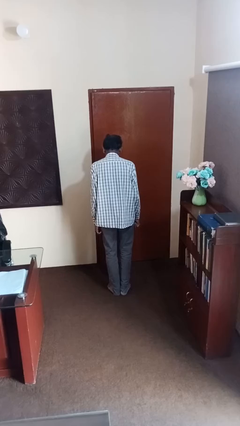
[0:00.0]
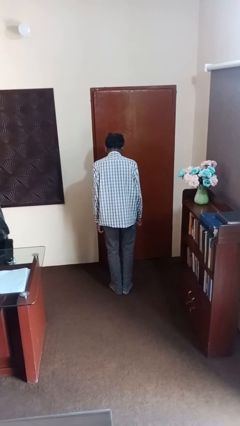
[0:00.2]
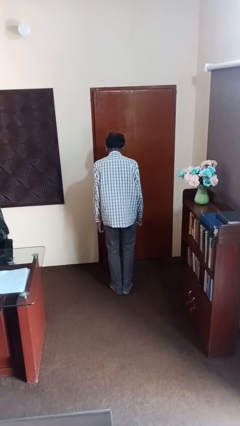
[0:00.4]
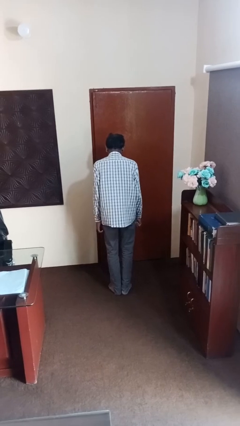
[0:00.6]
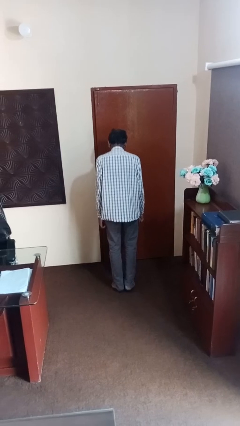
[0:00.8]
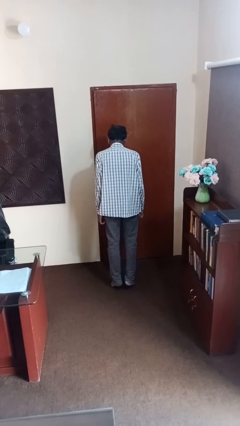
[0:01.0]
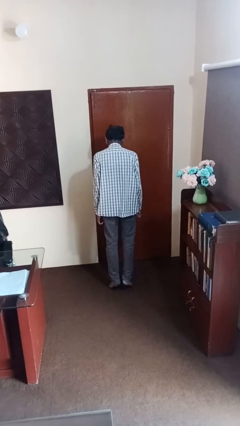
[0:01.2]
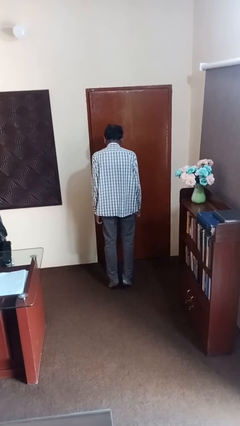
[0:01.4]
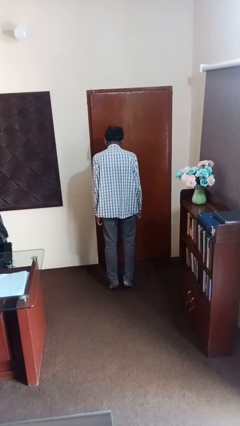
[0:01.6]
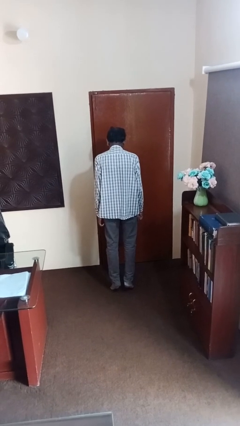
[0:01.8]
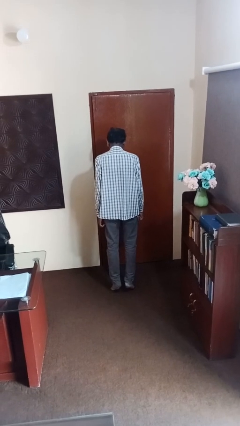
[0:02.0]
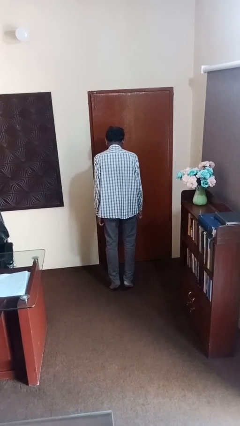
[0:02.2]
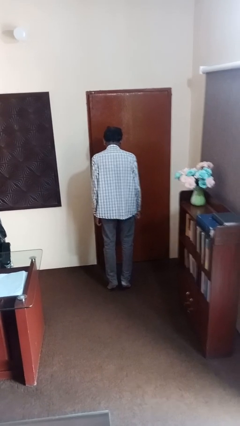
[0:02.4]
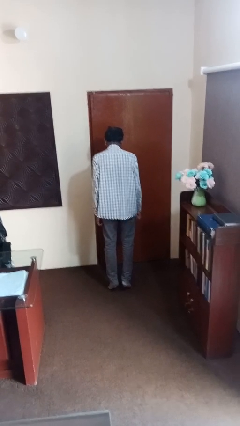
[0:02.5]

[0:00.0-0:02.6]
person walks tiptoe

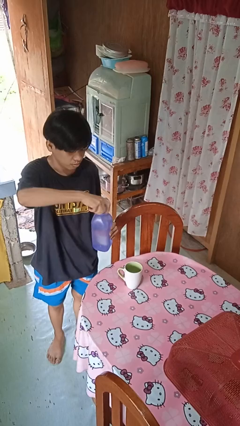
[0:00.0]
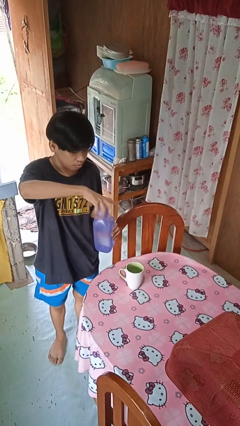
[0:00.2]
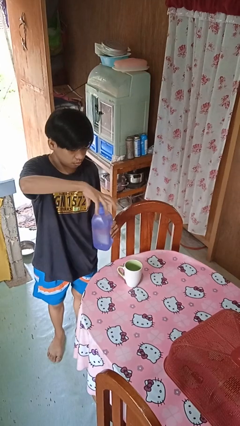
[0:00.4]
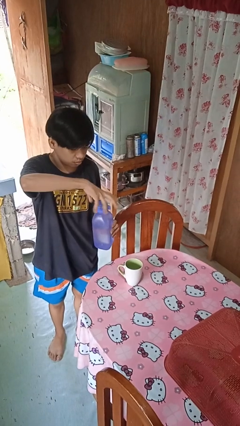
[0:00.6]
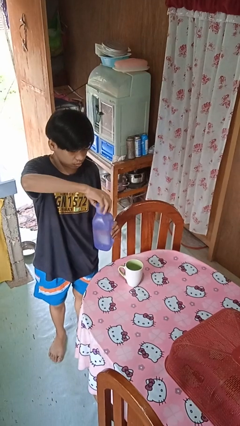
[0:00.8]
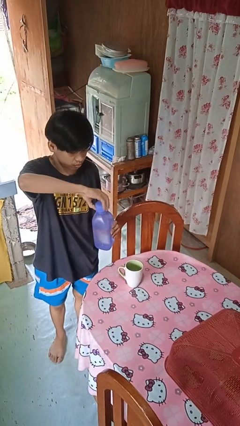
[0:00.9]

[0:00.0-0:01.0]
person unscrews lid from bottle

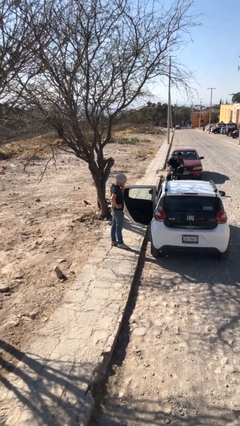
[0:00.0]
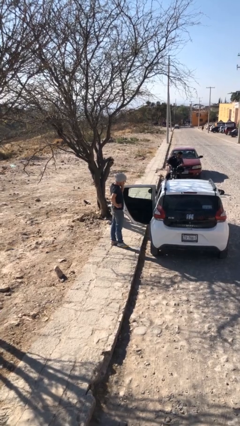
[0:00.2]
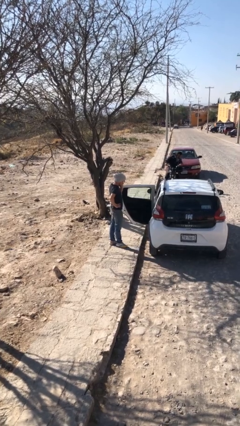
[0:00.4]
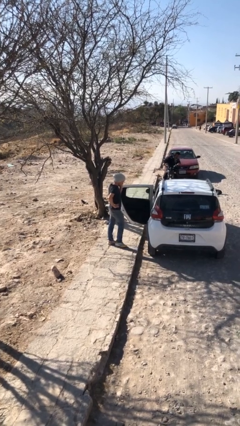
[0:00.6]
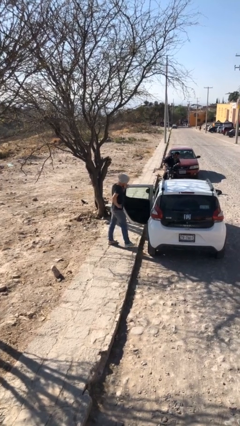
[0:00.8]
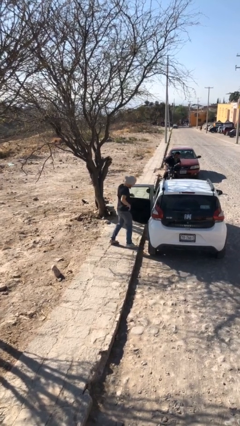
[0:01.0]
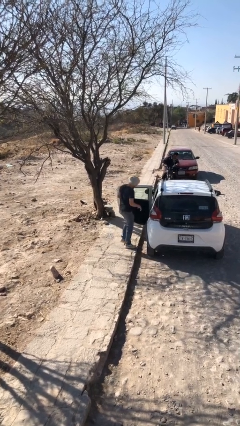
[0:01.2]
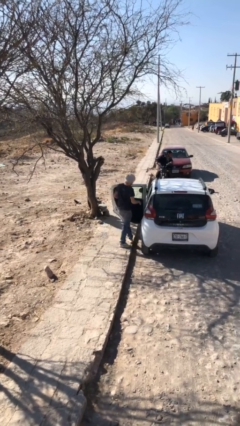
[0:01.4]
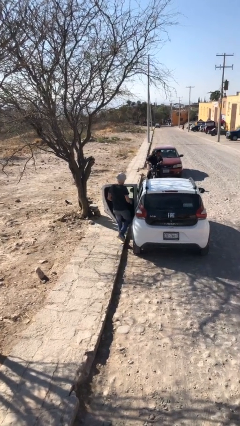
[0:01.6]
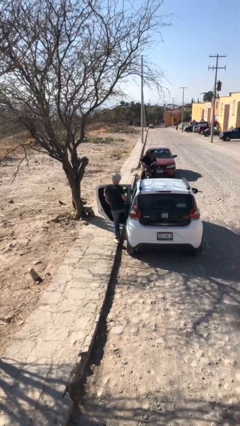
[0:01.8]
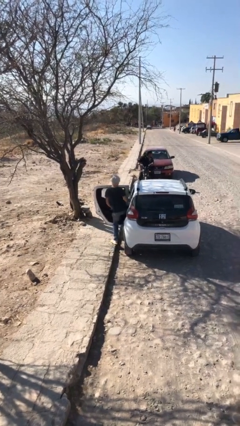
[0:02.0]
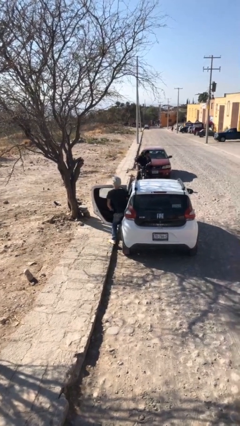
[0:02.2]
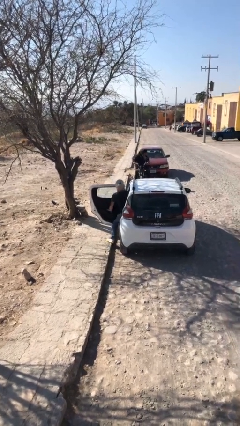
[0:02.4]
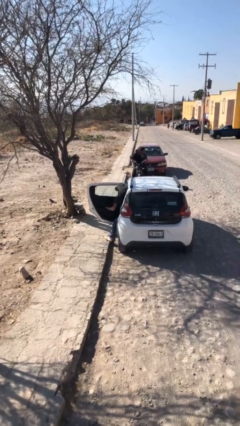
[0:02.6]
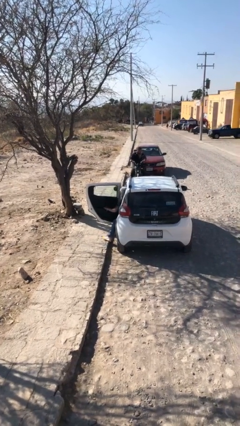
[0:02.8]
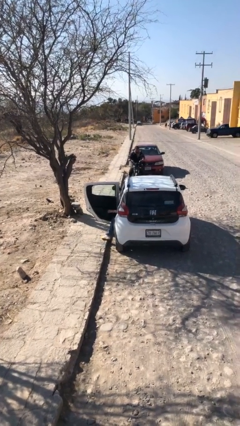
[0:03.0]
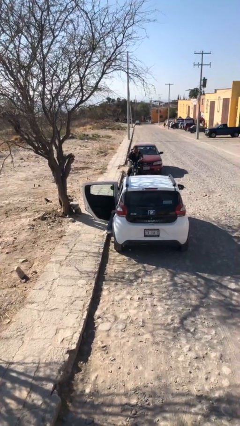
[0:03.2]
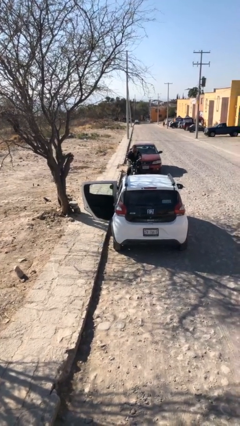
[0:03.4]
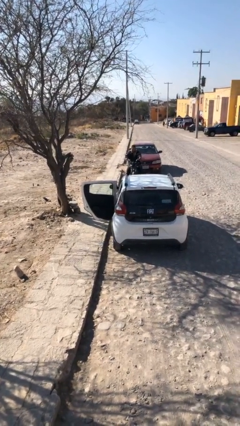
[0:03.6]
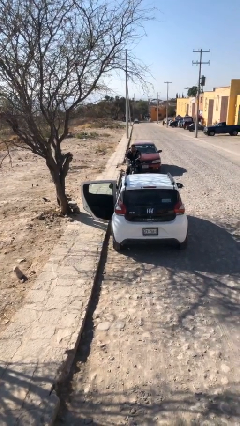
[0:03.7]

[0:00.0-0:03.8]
person enters car

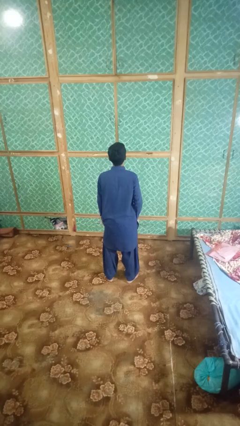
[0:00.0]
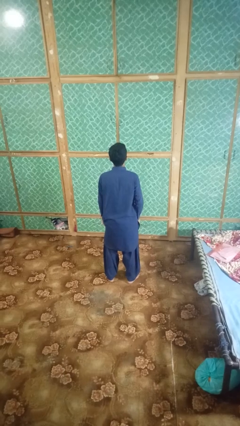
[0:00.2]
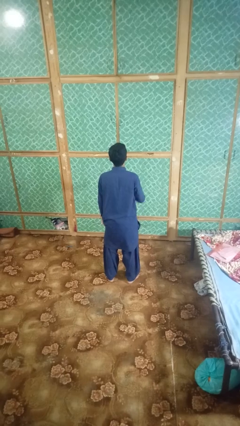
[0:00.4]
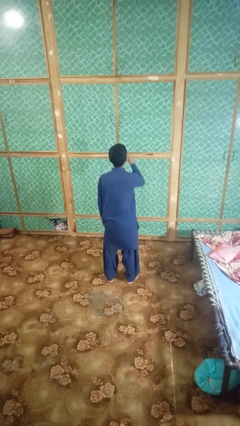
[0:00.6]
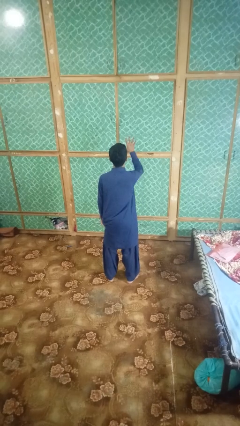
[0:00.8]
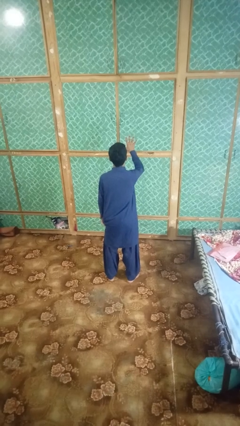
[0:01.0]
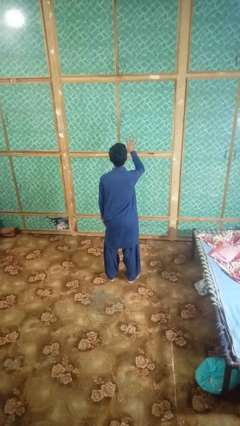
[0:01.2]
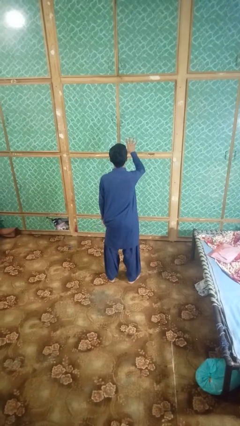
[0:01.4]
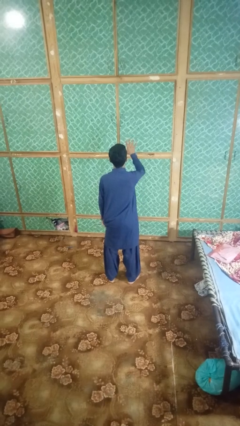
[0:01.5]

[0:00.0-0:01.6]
person gestures number five

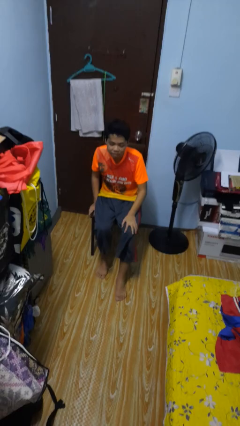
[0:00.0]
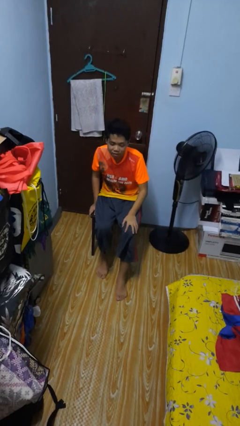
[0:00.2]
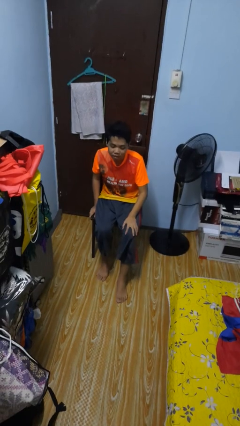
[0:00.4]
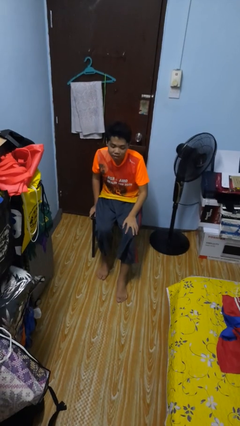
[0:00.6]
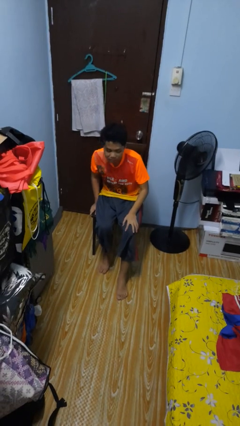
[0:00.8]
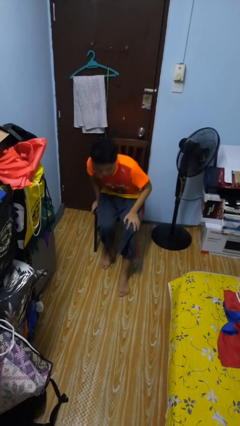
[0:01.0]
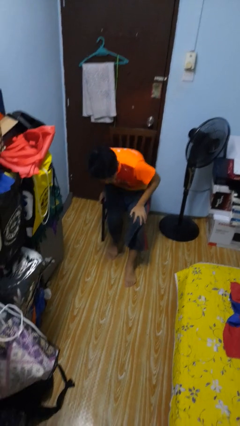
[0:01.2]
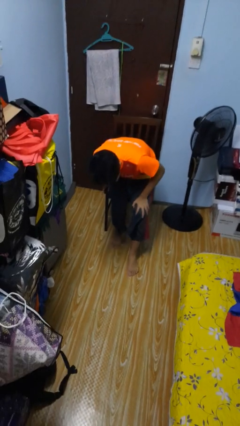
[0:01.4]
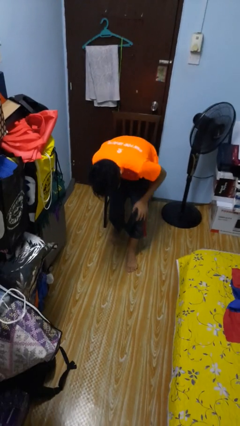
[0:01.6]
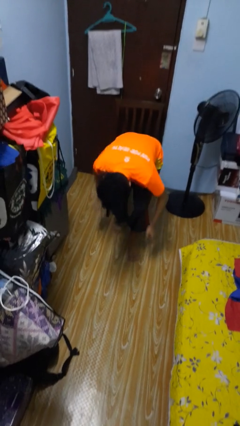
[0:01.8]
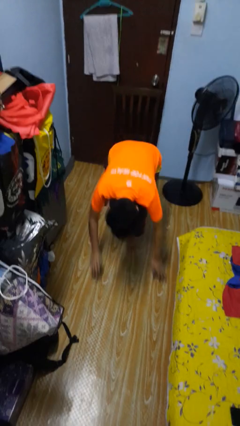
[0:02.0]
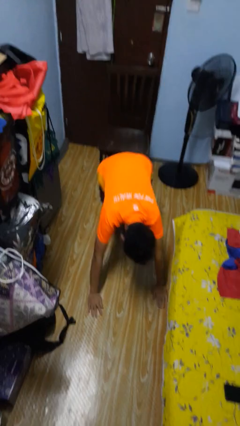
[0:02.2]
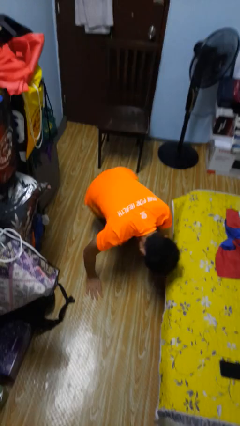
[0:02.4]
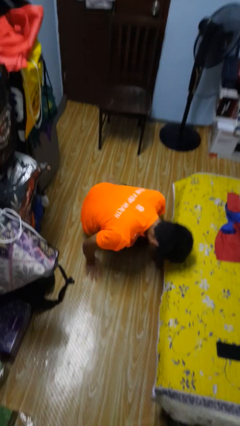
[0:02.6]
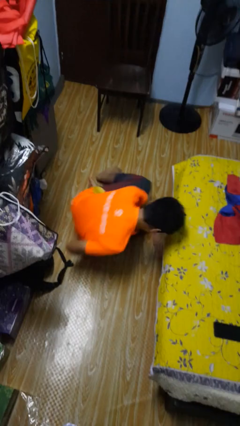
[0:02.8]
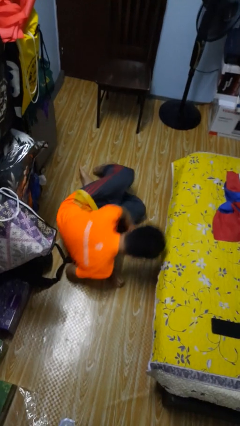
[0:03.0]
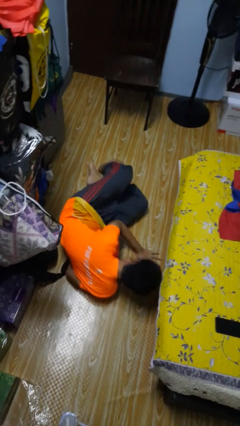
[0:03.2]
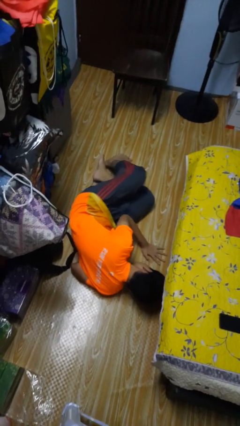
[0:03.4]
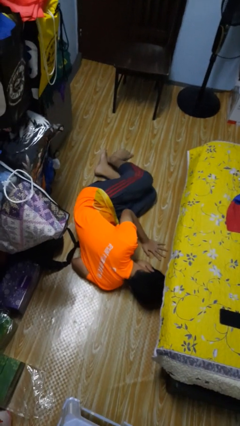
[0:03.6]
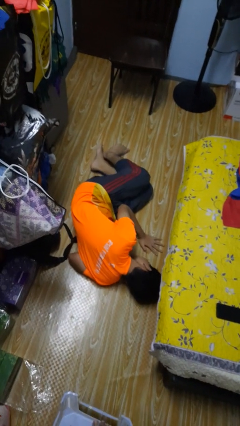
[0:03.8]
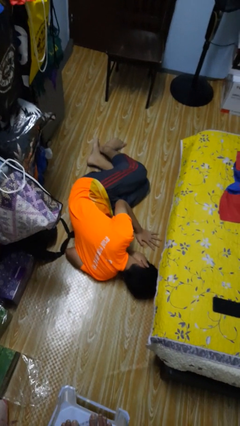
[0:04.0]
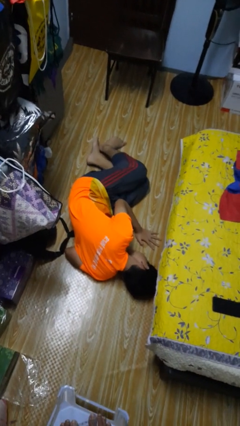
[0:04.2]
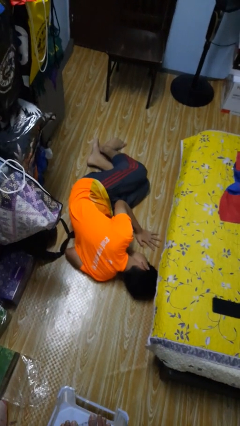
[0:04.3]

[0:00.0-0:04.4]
person falls from chair

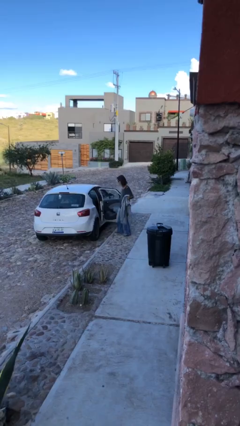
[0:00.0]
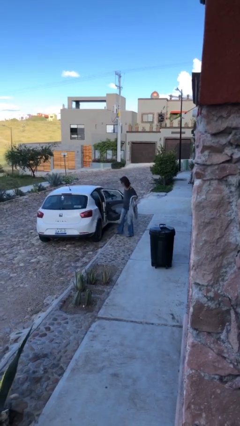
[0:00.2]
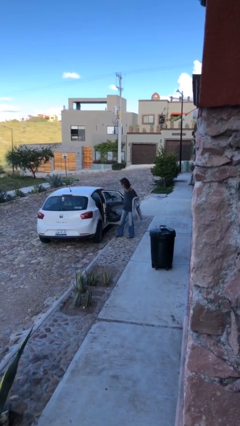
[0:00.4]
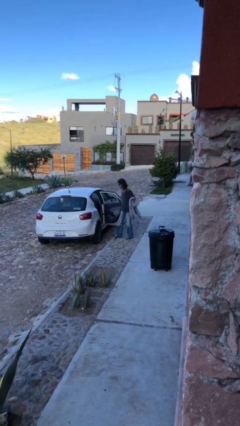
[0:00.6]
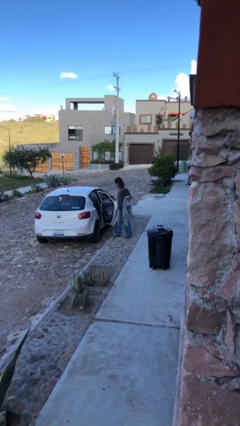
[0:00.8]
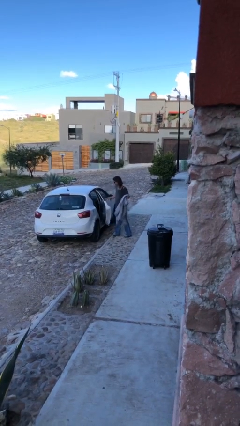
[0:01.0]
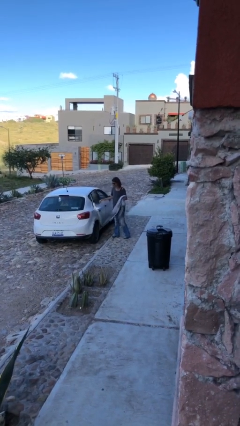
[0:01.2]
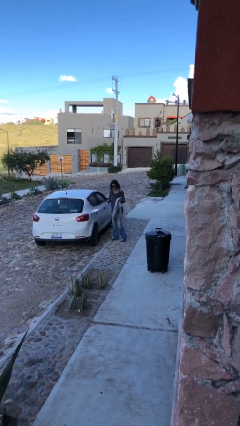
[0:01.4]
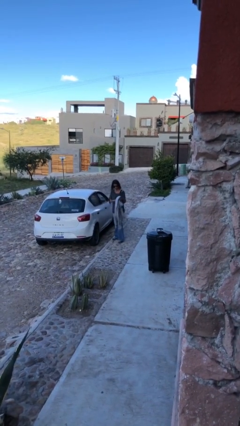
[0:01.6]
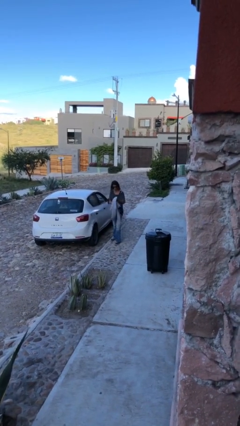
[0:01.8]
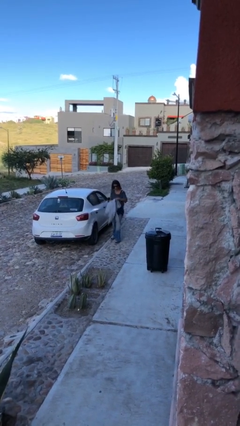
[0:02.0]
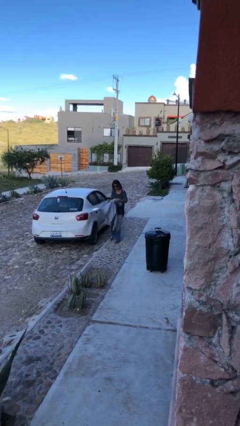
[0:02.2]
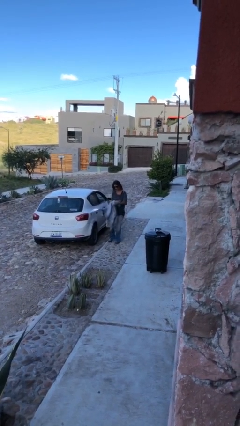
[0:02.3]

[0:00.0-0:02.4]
person closes car door

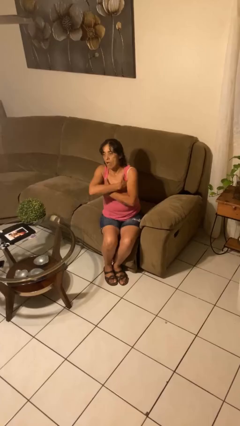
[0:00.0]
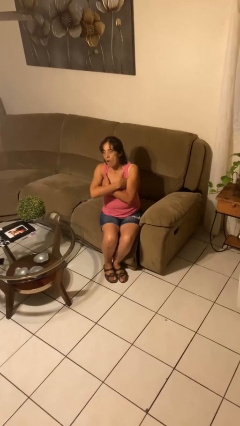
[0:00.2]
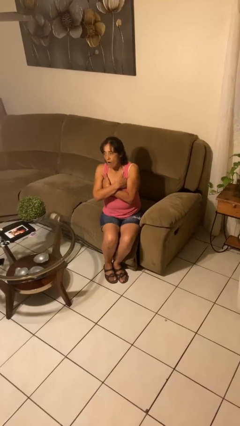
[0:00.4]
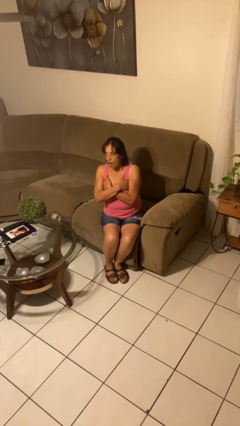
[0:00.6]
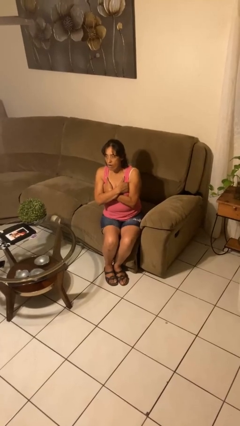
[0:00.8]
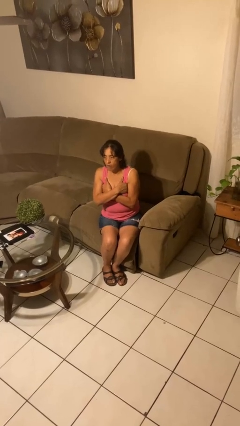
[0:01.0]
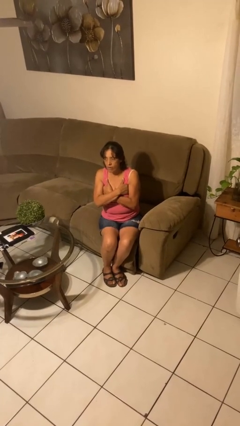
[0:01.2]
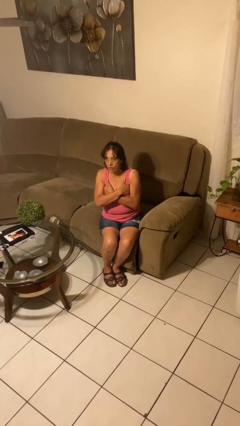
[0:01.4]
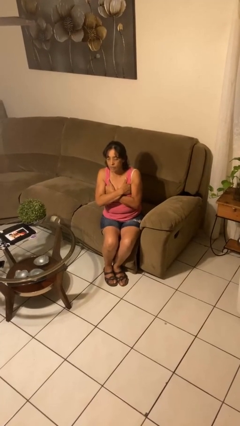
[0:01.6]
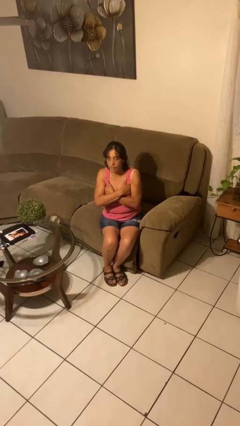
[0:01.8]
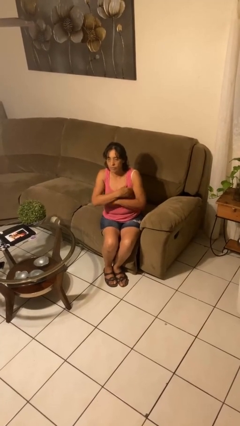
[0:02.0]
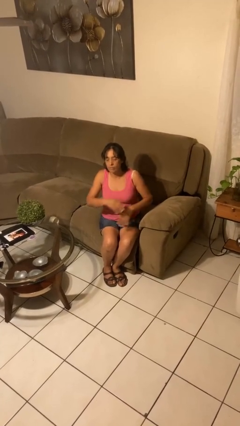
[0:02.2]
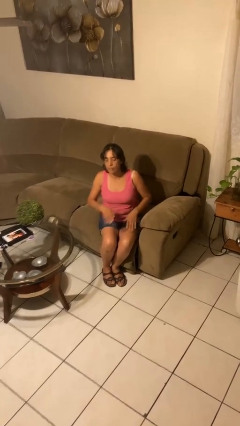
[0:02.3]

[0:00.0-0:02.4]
person gestures arms x
